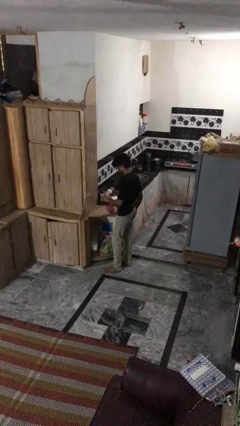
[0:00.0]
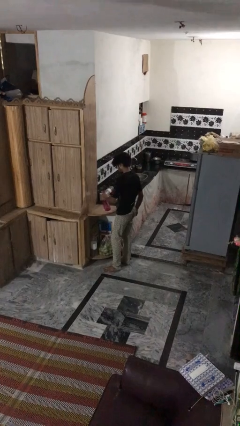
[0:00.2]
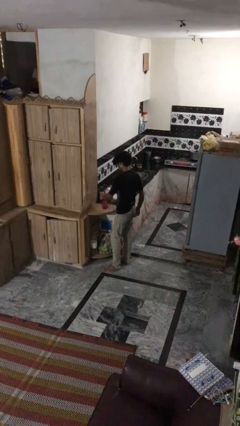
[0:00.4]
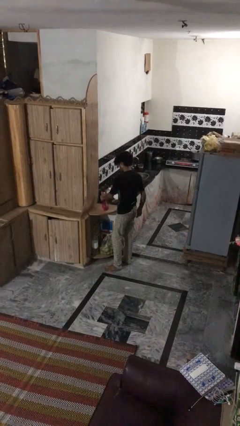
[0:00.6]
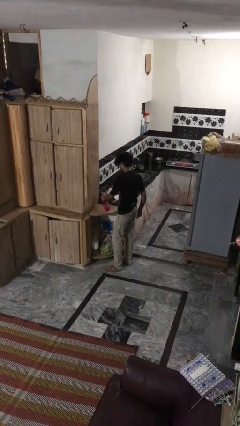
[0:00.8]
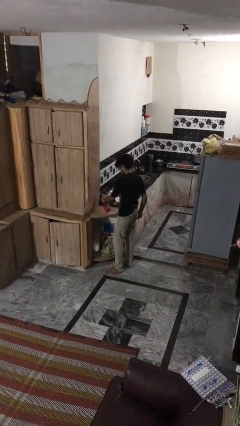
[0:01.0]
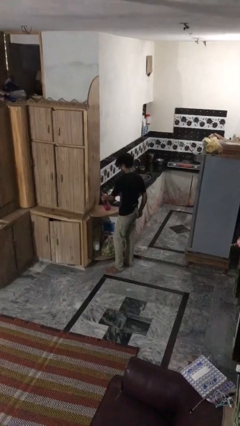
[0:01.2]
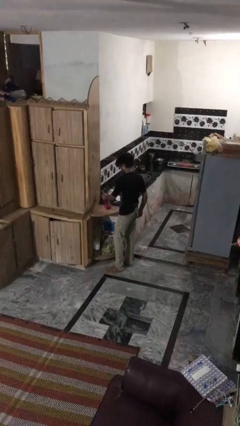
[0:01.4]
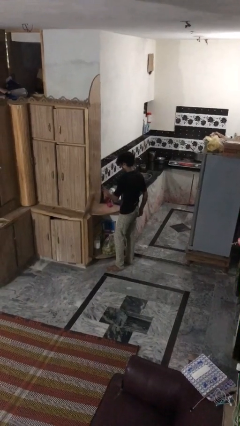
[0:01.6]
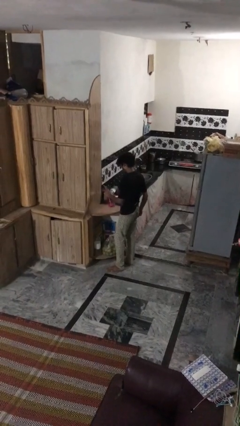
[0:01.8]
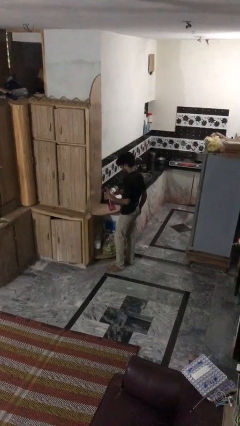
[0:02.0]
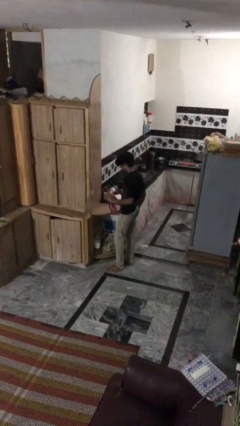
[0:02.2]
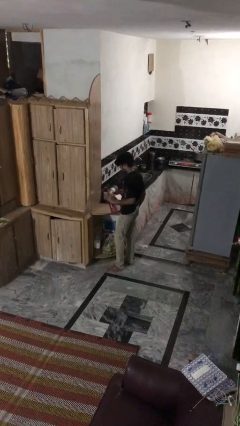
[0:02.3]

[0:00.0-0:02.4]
person sprays from bottle

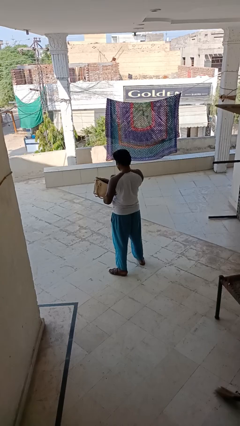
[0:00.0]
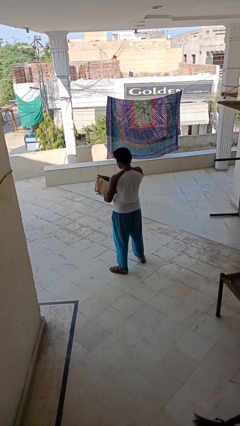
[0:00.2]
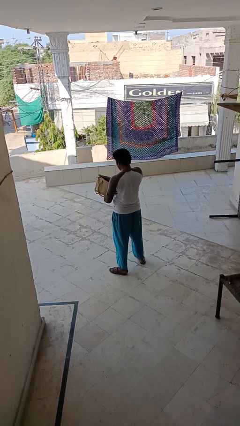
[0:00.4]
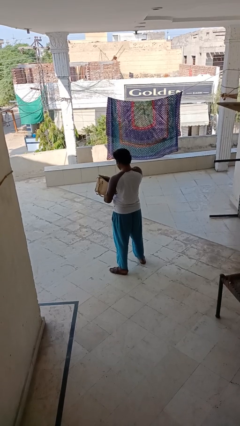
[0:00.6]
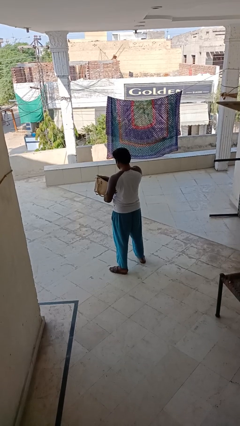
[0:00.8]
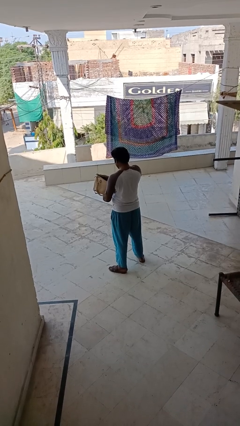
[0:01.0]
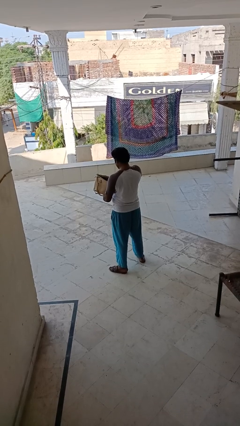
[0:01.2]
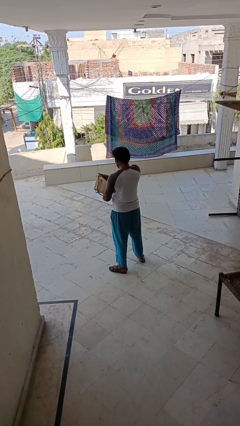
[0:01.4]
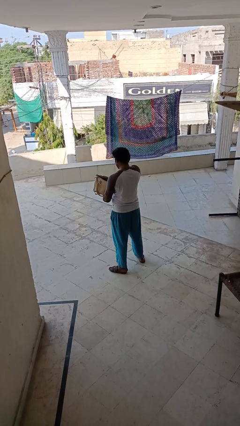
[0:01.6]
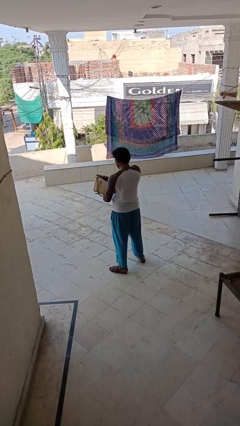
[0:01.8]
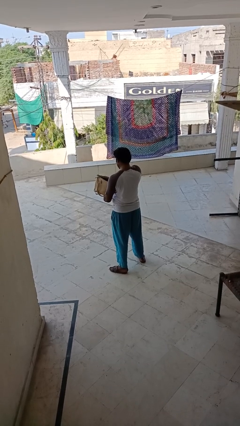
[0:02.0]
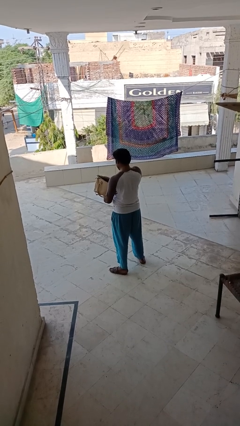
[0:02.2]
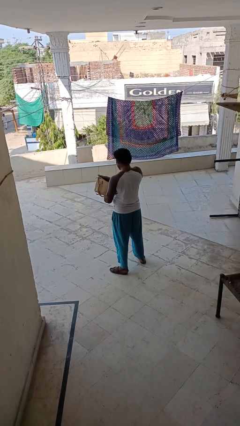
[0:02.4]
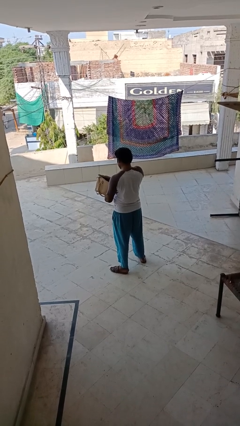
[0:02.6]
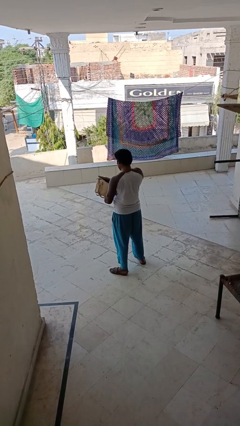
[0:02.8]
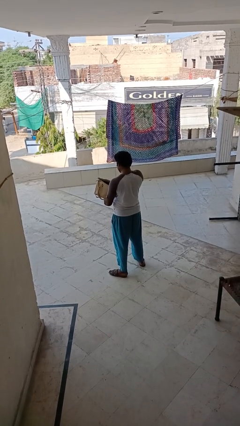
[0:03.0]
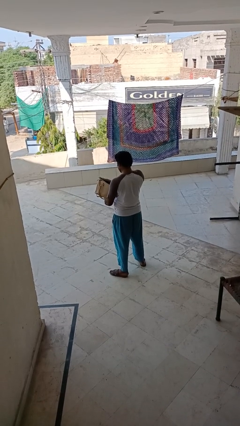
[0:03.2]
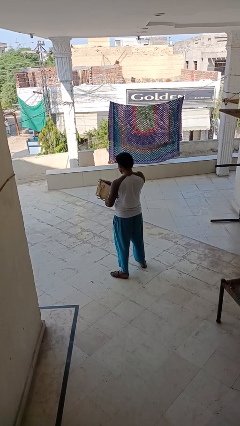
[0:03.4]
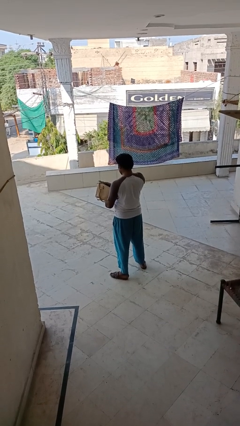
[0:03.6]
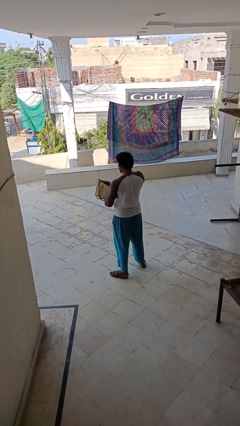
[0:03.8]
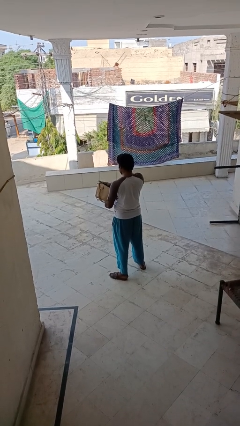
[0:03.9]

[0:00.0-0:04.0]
person searches in purse

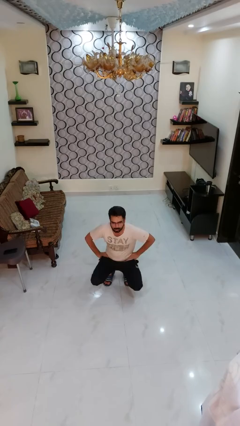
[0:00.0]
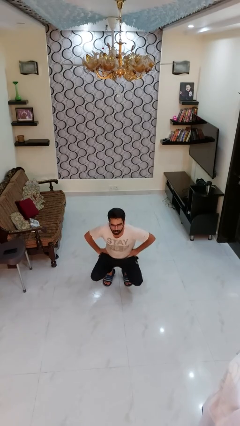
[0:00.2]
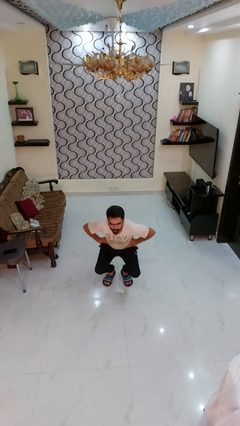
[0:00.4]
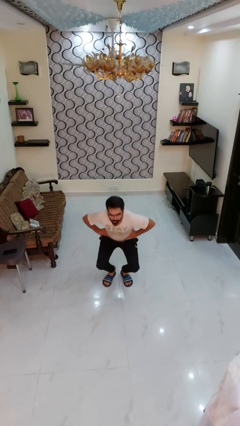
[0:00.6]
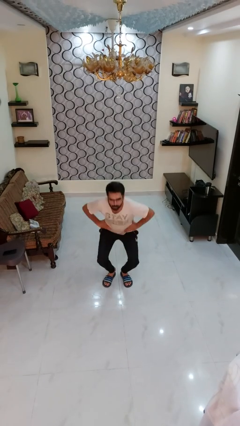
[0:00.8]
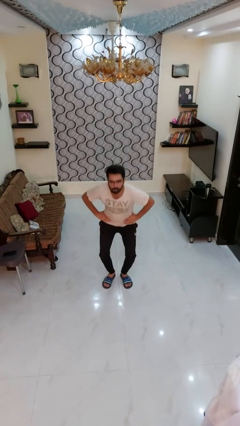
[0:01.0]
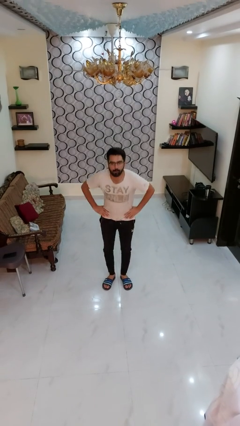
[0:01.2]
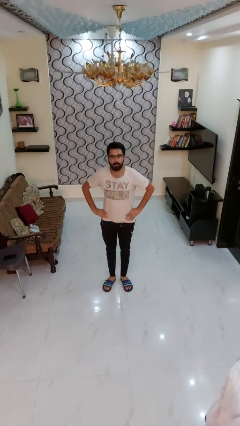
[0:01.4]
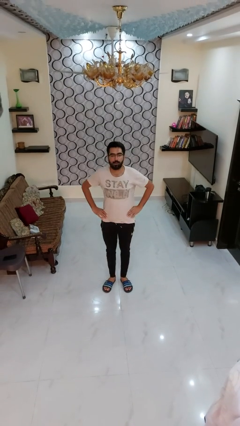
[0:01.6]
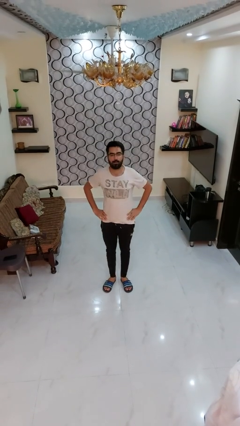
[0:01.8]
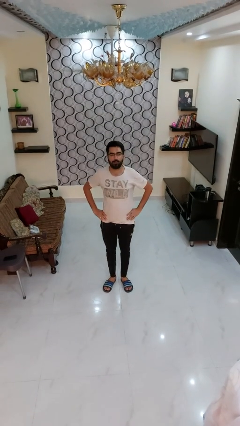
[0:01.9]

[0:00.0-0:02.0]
person stands up

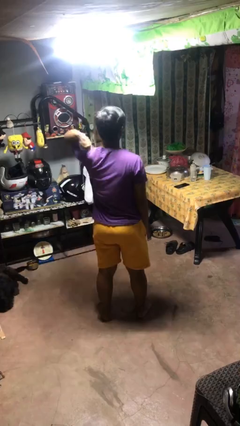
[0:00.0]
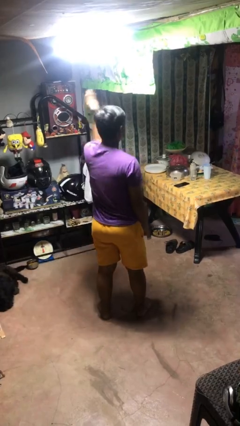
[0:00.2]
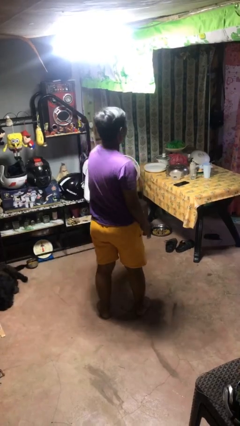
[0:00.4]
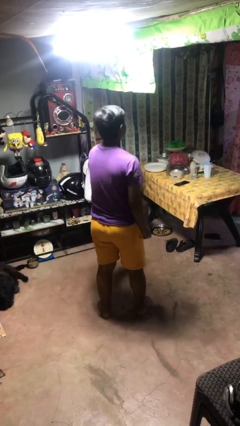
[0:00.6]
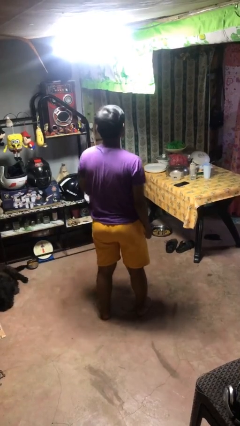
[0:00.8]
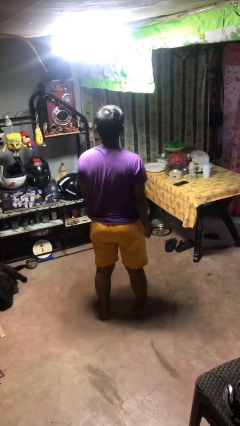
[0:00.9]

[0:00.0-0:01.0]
person karate chop

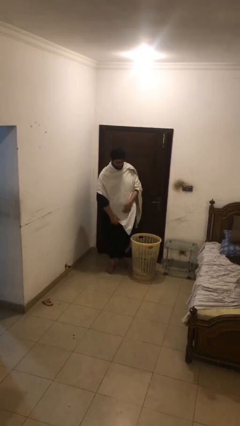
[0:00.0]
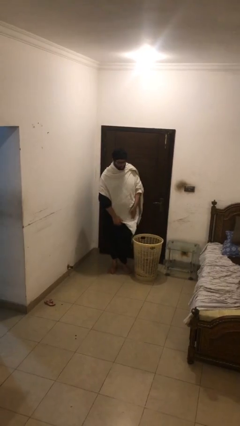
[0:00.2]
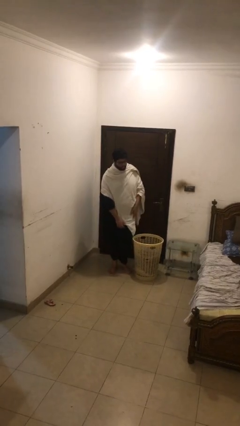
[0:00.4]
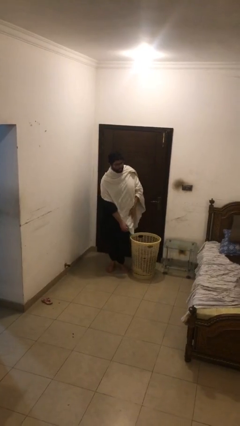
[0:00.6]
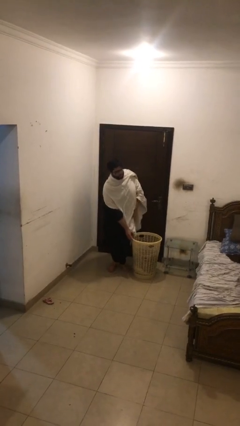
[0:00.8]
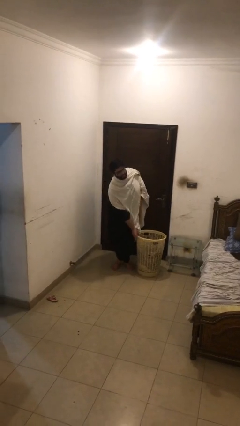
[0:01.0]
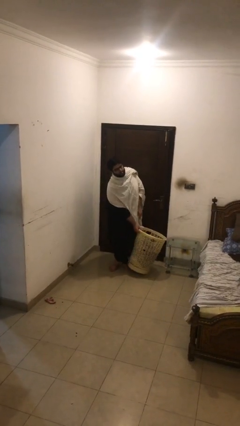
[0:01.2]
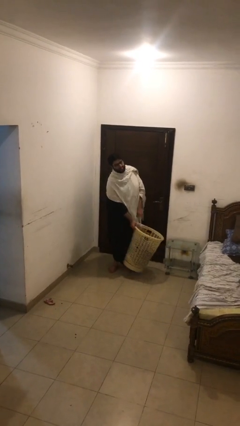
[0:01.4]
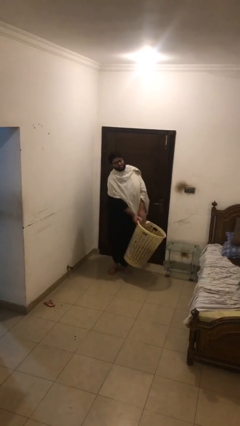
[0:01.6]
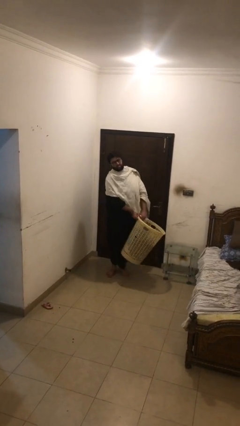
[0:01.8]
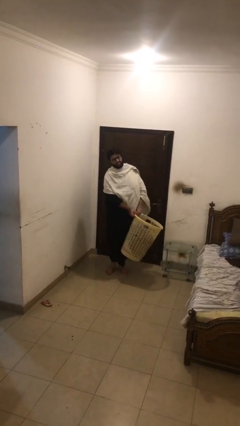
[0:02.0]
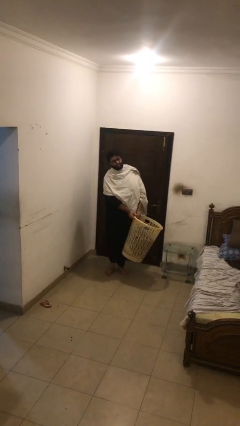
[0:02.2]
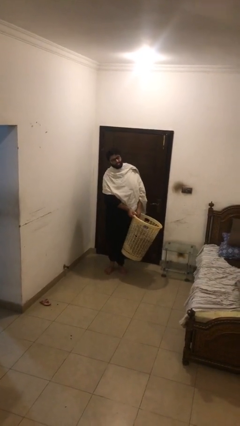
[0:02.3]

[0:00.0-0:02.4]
person picks up object from floor

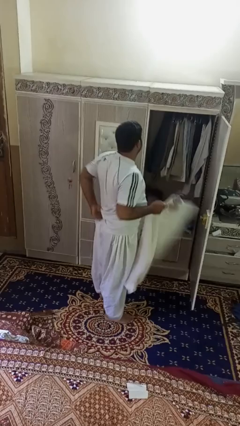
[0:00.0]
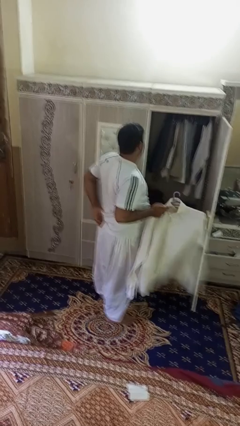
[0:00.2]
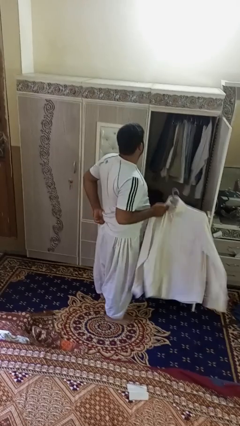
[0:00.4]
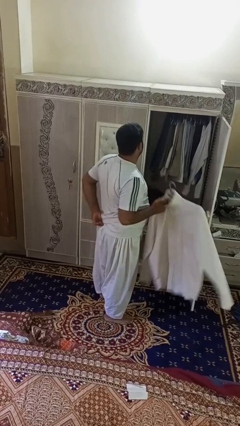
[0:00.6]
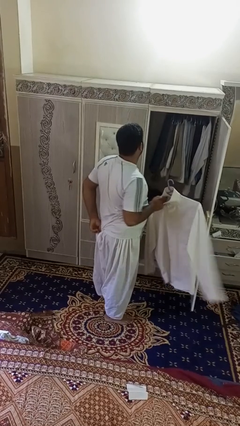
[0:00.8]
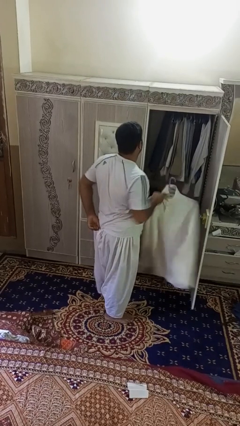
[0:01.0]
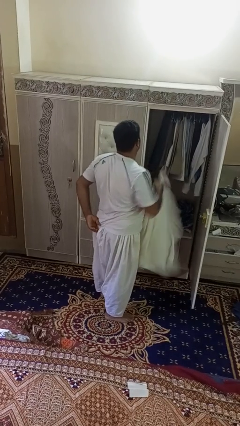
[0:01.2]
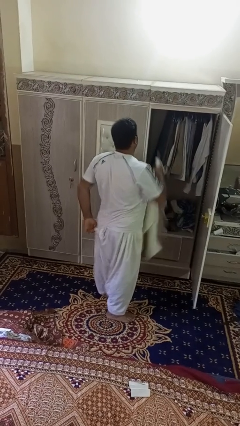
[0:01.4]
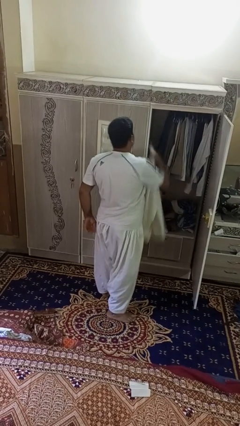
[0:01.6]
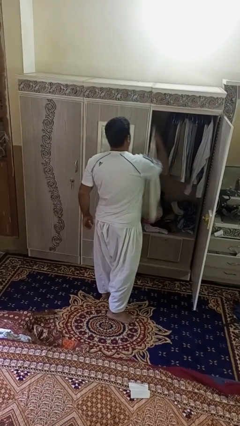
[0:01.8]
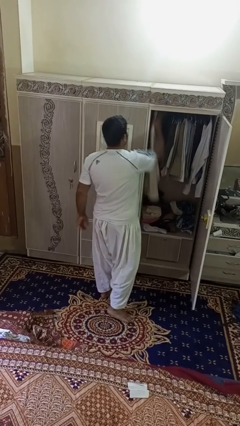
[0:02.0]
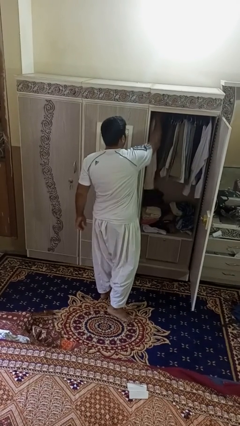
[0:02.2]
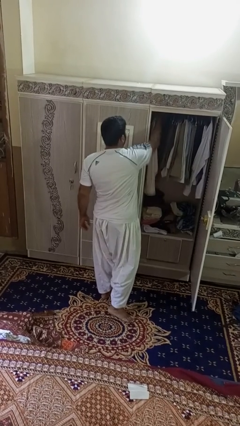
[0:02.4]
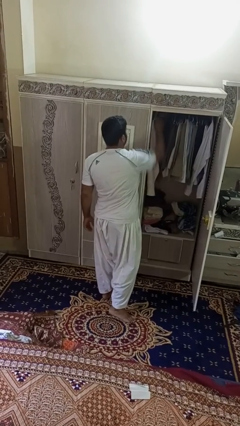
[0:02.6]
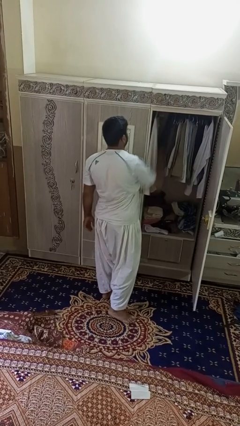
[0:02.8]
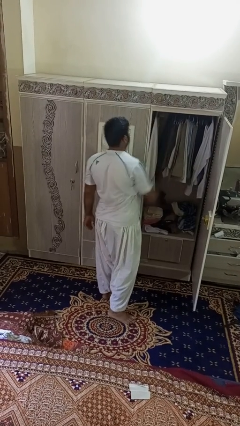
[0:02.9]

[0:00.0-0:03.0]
person puts clothes into closet

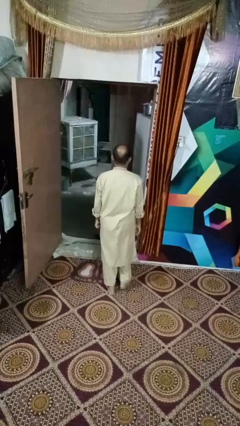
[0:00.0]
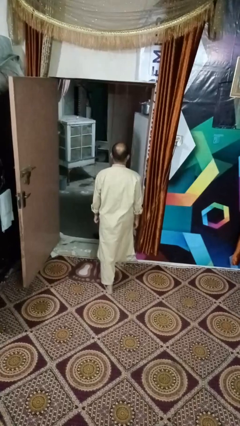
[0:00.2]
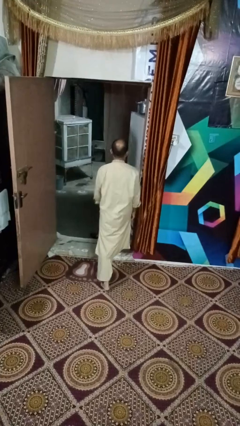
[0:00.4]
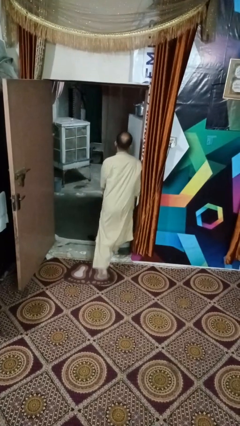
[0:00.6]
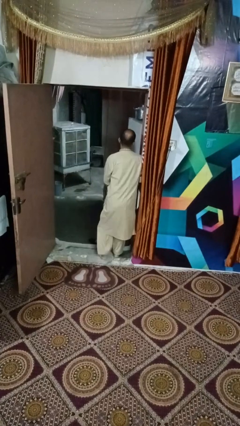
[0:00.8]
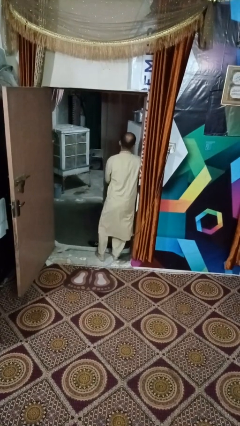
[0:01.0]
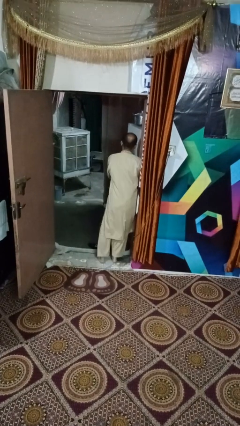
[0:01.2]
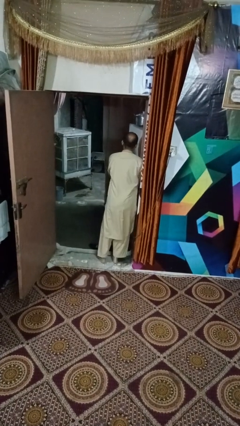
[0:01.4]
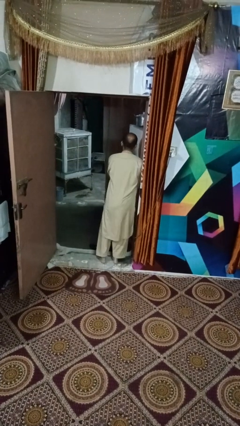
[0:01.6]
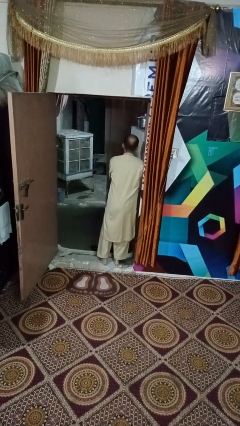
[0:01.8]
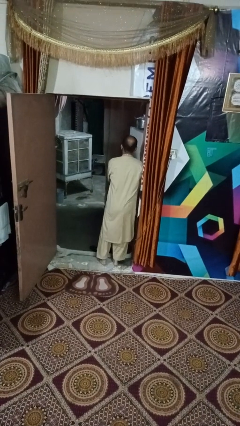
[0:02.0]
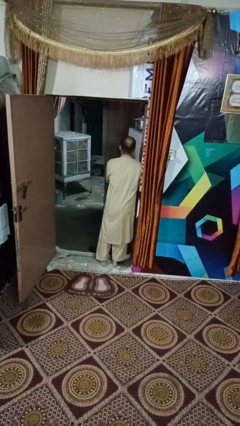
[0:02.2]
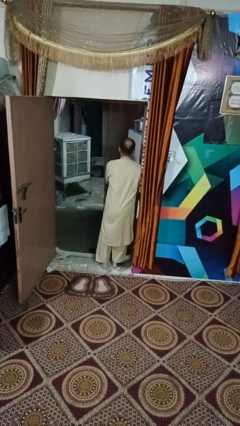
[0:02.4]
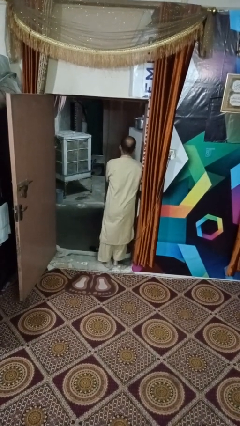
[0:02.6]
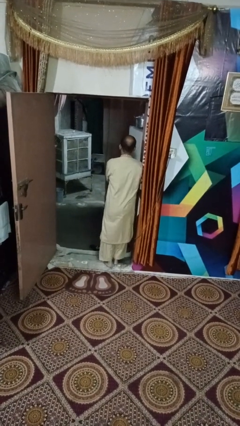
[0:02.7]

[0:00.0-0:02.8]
person bumps into wall
